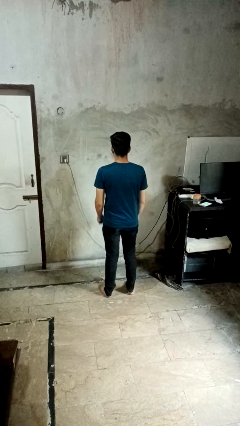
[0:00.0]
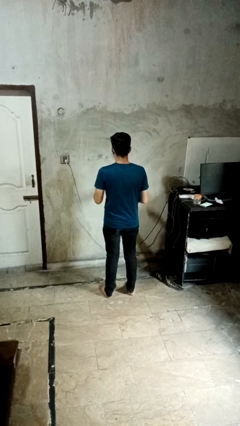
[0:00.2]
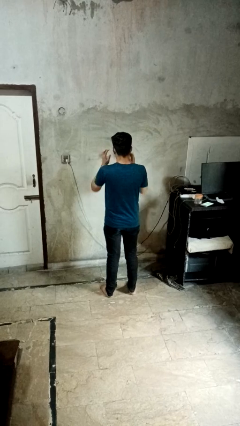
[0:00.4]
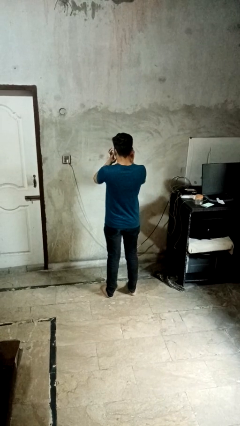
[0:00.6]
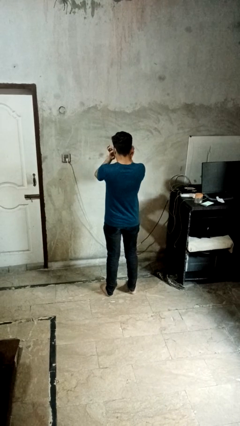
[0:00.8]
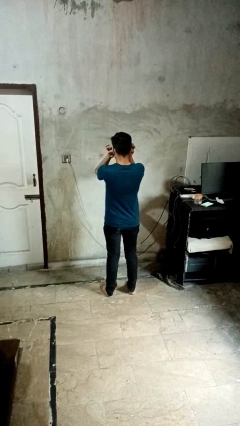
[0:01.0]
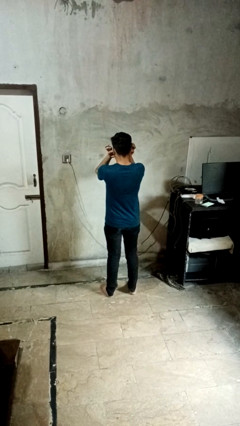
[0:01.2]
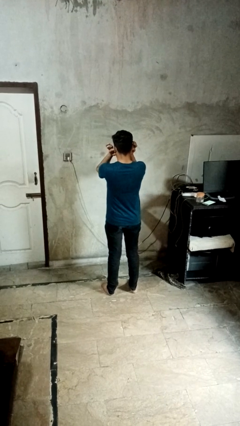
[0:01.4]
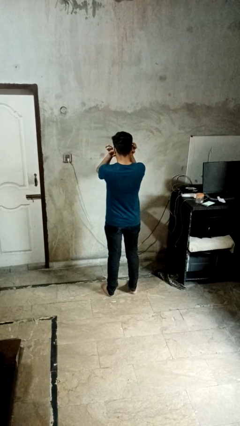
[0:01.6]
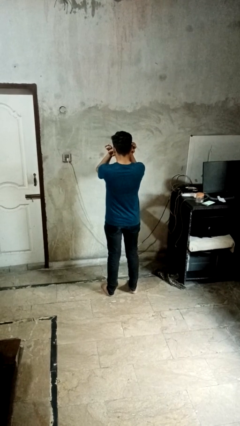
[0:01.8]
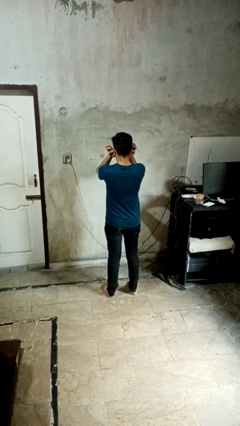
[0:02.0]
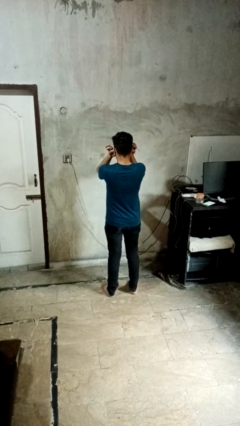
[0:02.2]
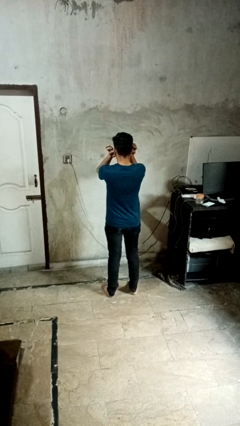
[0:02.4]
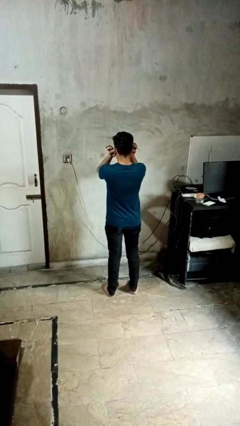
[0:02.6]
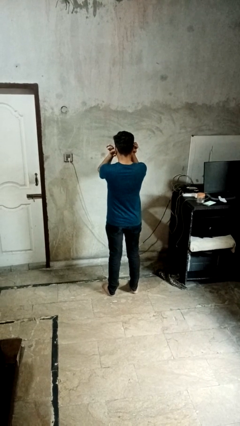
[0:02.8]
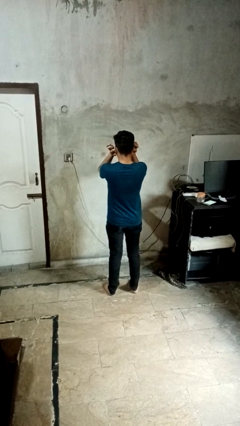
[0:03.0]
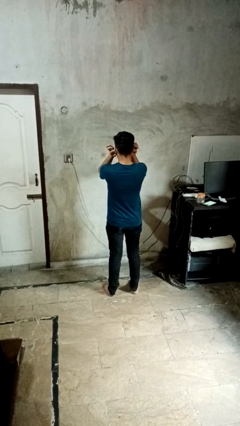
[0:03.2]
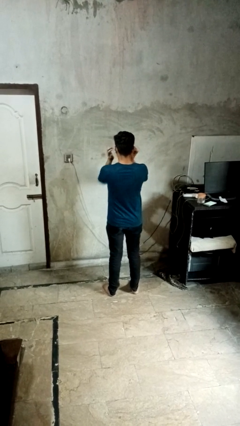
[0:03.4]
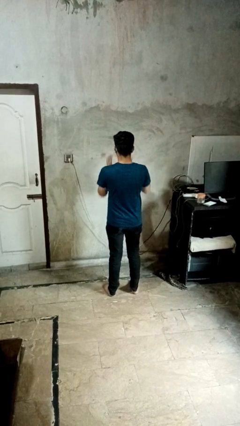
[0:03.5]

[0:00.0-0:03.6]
person puts fingers in ear

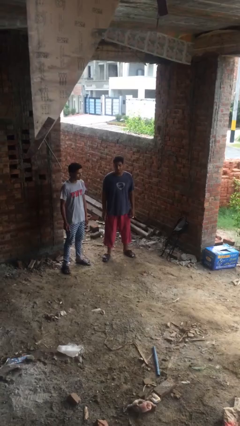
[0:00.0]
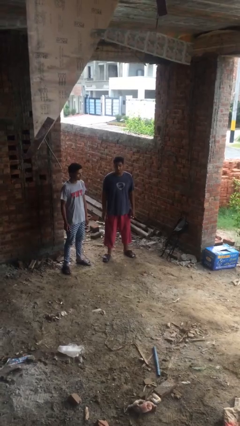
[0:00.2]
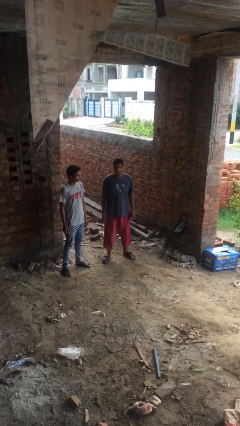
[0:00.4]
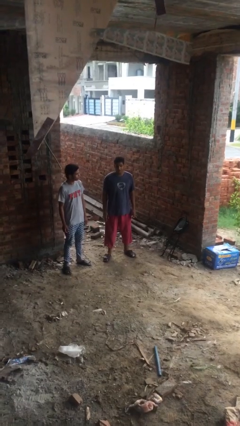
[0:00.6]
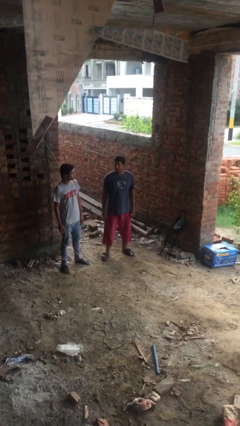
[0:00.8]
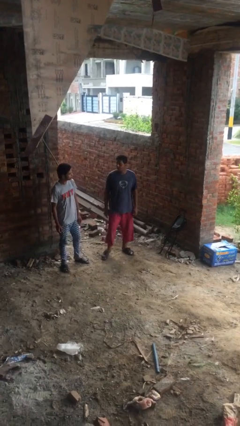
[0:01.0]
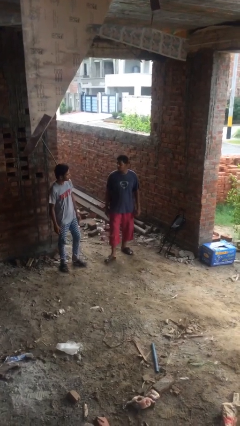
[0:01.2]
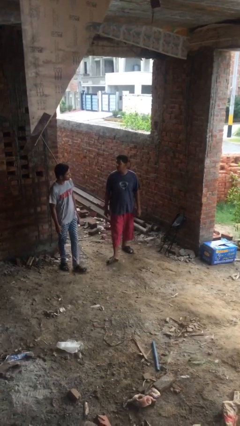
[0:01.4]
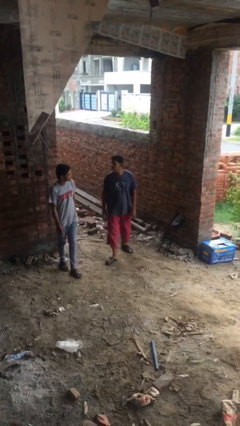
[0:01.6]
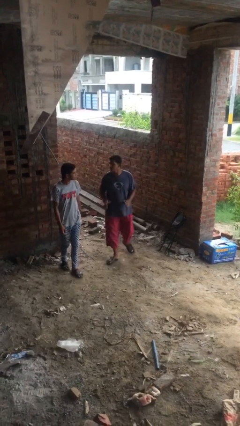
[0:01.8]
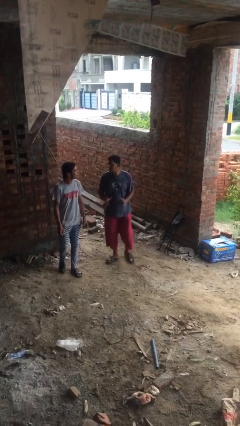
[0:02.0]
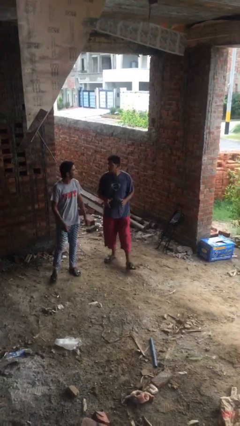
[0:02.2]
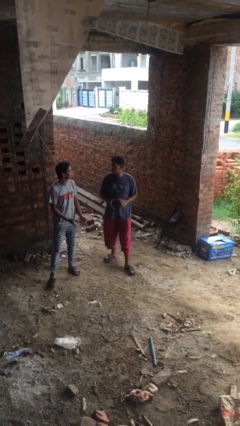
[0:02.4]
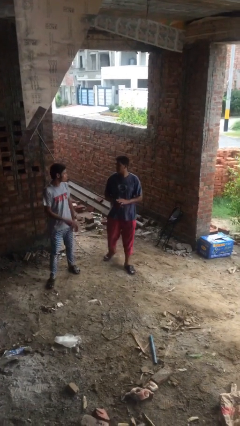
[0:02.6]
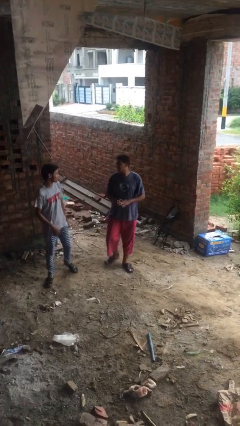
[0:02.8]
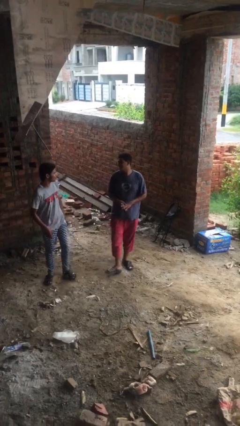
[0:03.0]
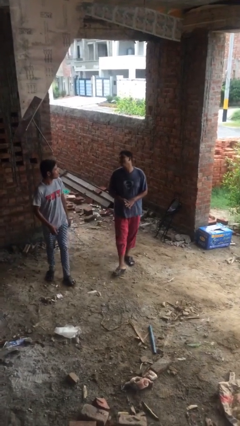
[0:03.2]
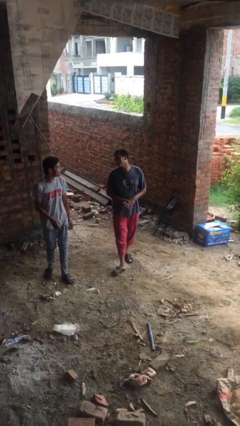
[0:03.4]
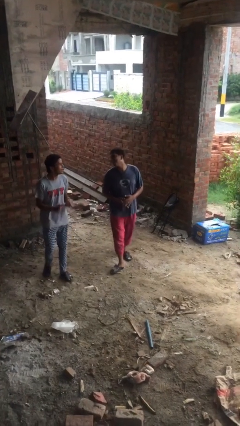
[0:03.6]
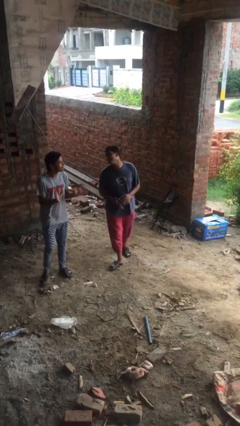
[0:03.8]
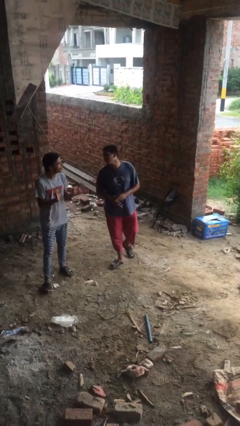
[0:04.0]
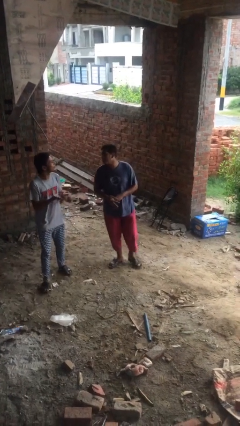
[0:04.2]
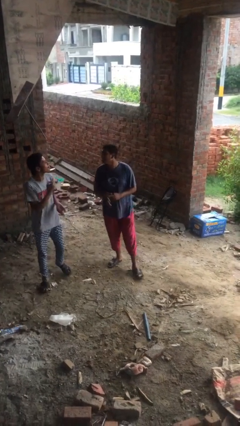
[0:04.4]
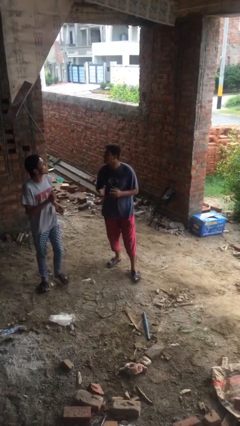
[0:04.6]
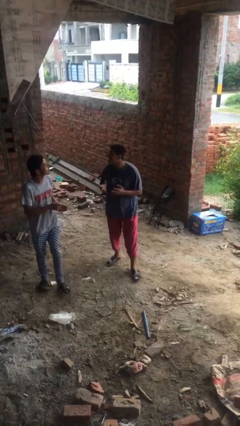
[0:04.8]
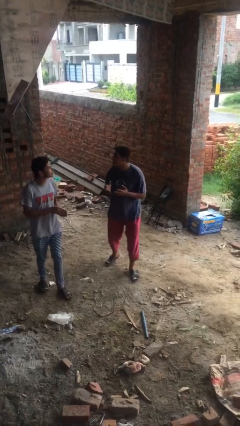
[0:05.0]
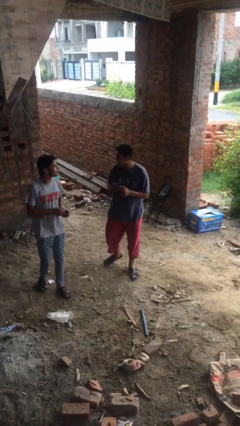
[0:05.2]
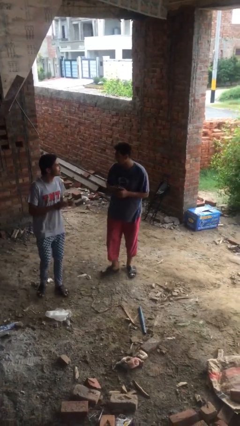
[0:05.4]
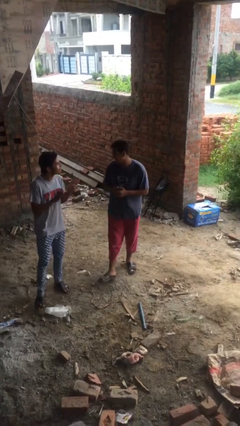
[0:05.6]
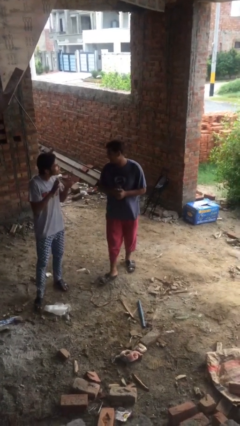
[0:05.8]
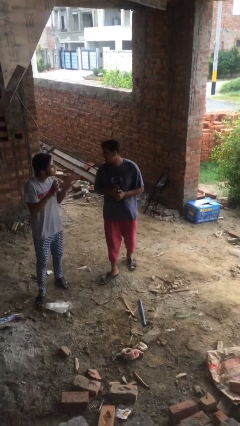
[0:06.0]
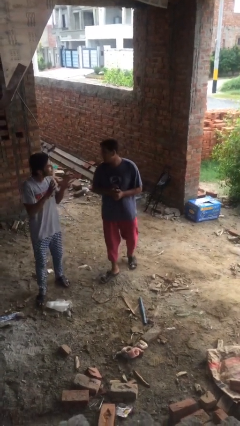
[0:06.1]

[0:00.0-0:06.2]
person talks to person

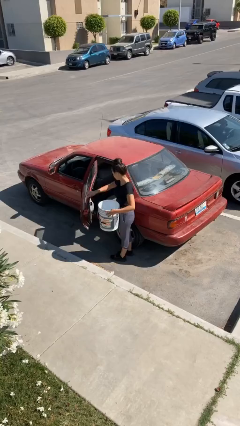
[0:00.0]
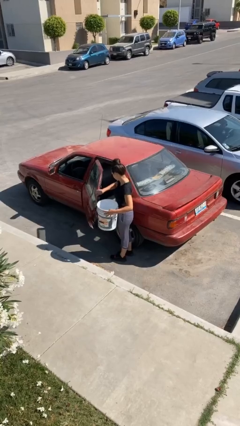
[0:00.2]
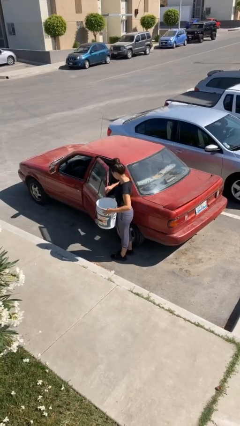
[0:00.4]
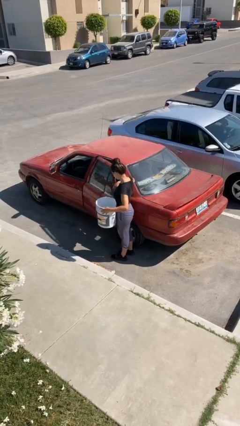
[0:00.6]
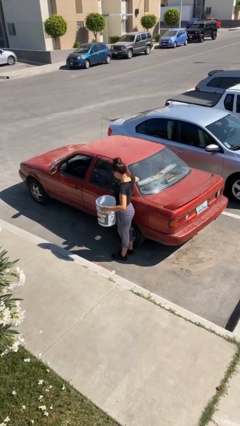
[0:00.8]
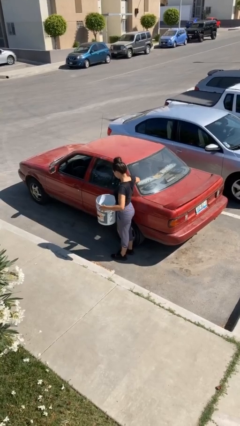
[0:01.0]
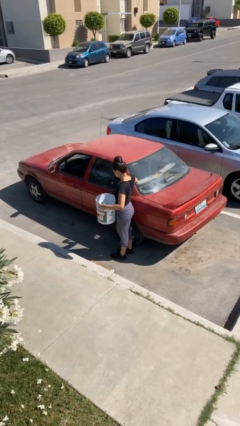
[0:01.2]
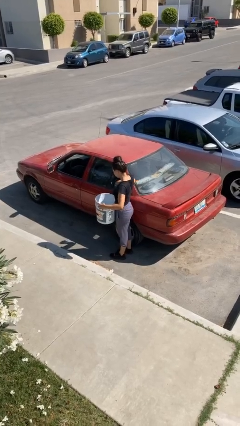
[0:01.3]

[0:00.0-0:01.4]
person closes car door

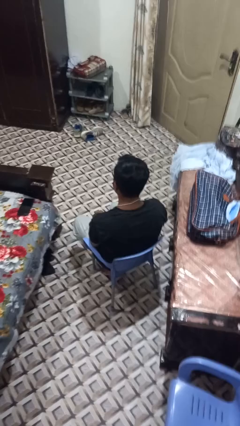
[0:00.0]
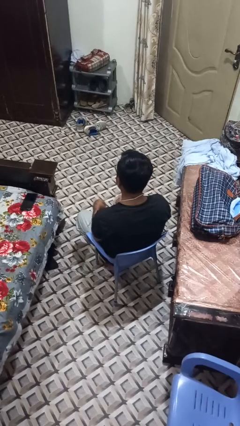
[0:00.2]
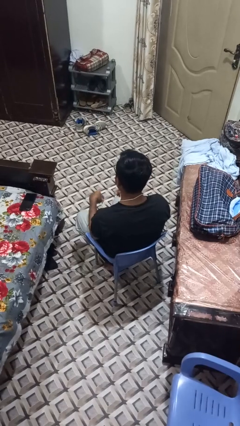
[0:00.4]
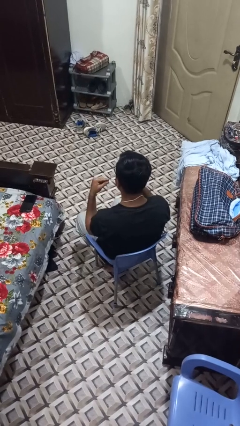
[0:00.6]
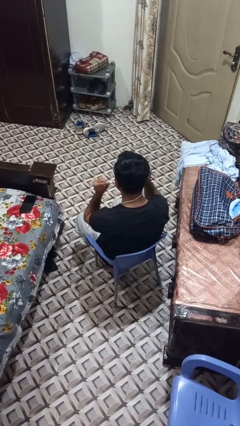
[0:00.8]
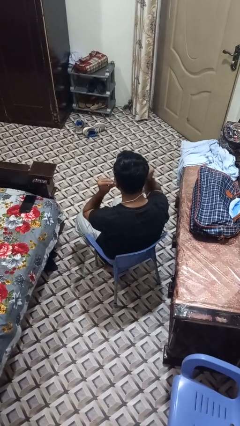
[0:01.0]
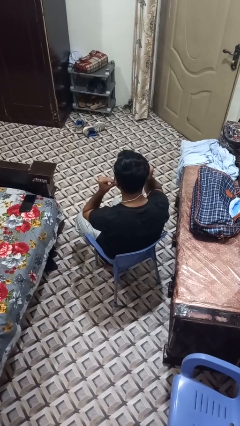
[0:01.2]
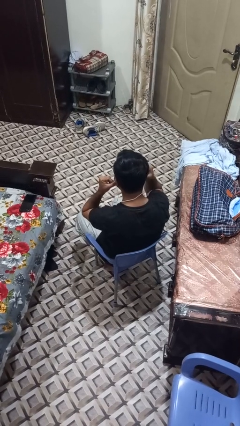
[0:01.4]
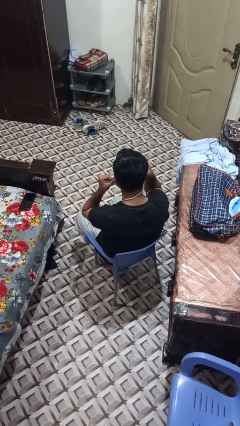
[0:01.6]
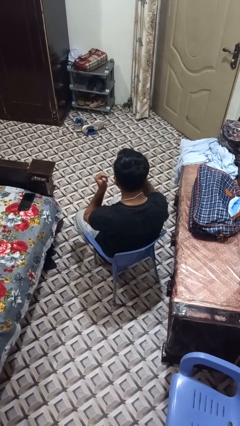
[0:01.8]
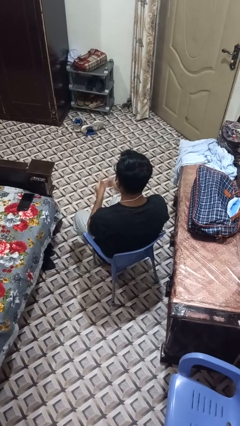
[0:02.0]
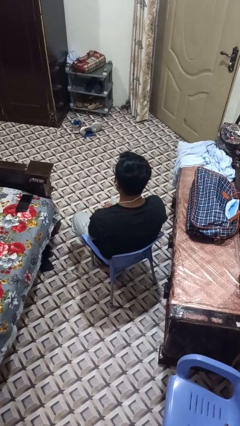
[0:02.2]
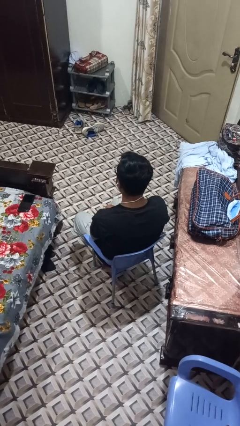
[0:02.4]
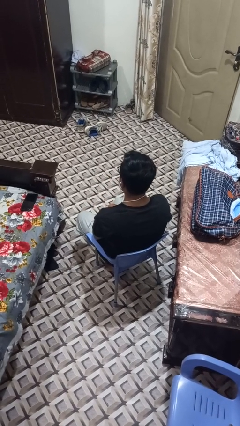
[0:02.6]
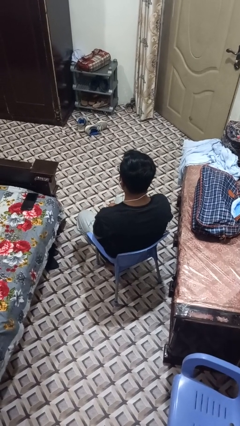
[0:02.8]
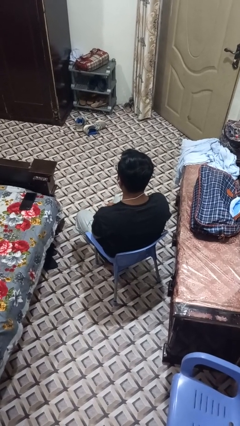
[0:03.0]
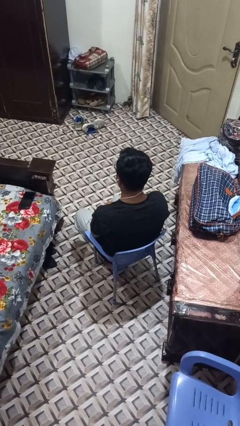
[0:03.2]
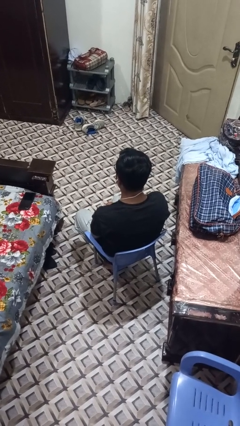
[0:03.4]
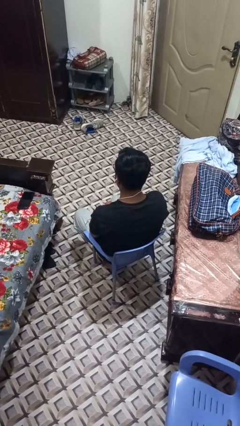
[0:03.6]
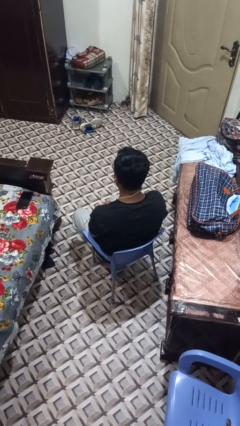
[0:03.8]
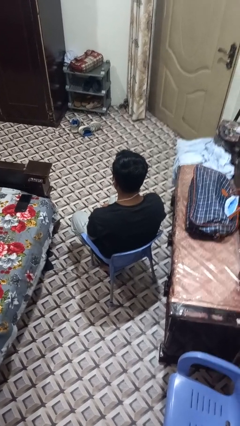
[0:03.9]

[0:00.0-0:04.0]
person puts on headphones

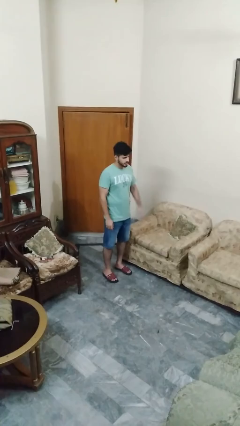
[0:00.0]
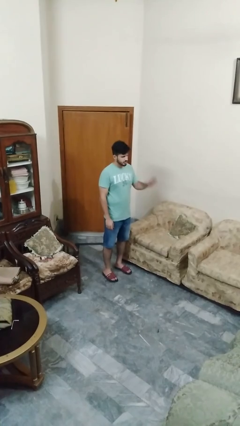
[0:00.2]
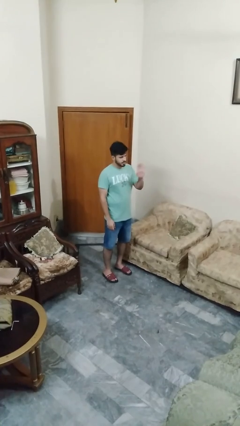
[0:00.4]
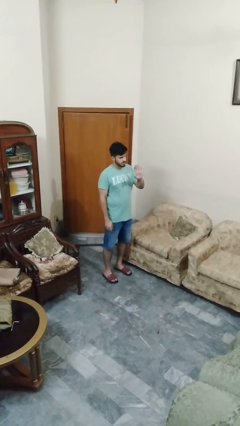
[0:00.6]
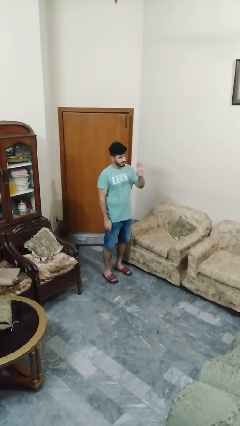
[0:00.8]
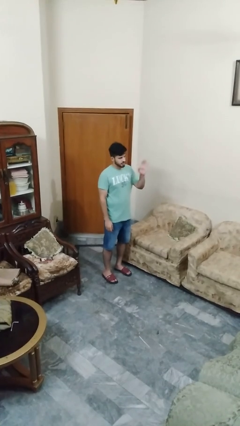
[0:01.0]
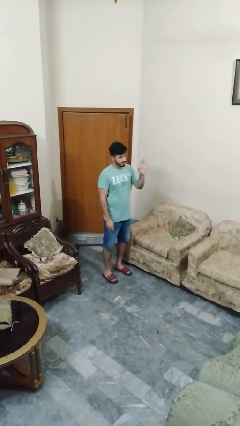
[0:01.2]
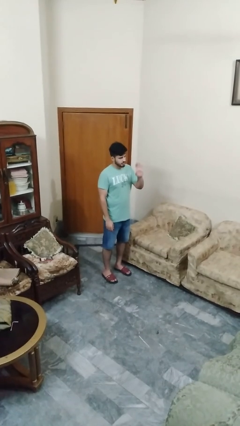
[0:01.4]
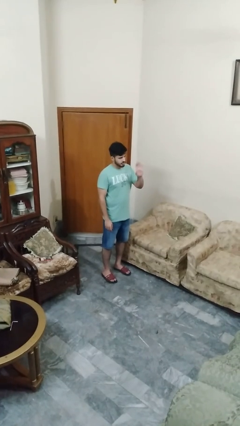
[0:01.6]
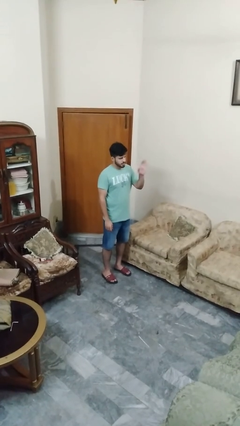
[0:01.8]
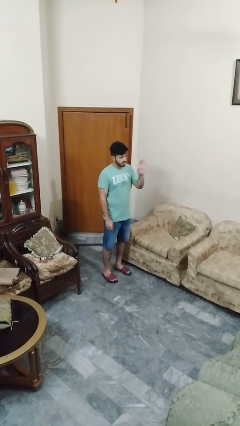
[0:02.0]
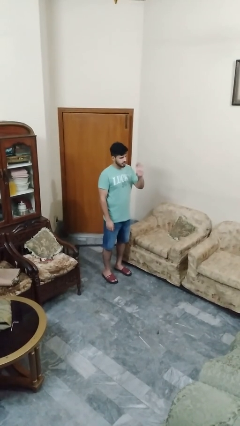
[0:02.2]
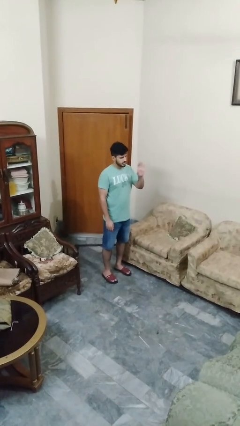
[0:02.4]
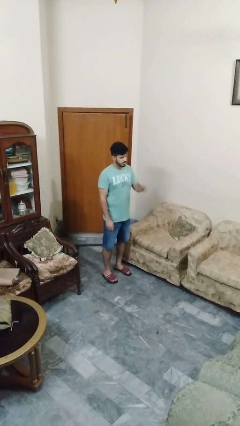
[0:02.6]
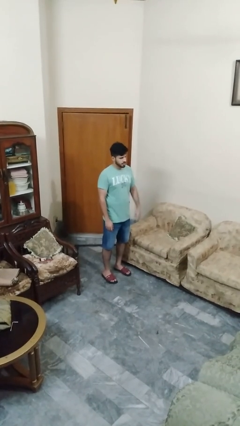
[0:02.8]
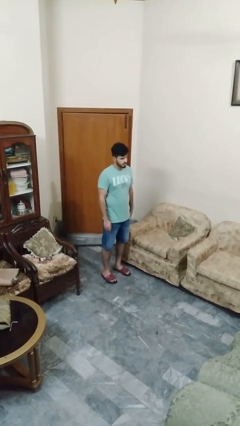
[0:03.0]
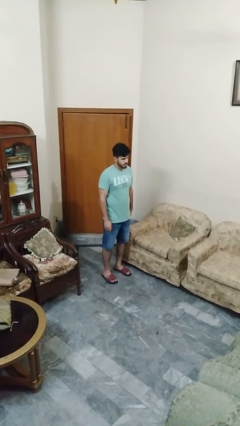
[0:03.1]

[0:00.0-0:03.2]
person waves at person
